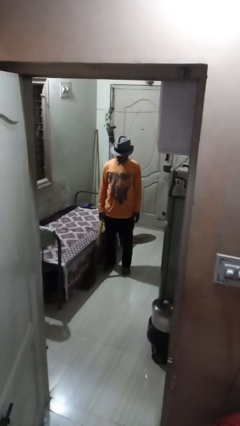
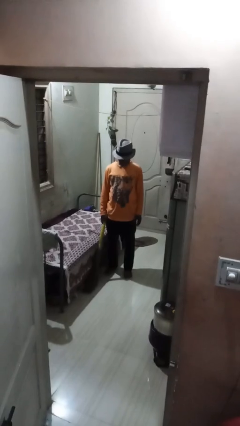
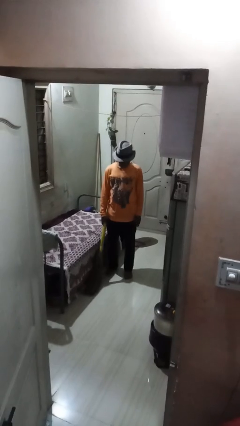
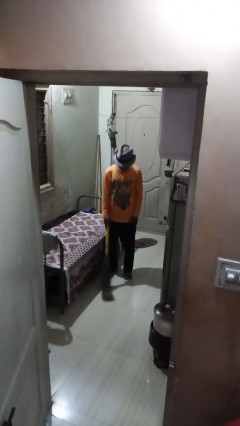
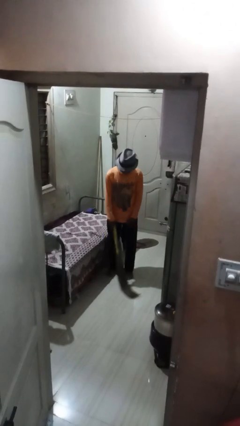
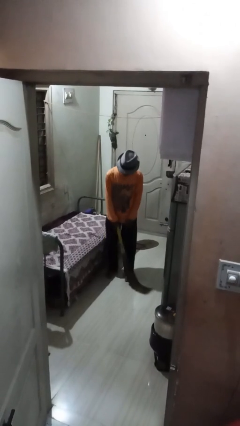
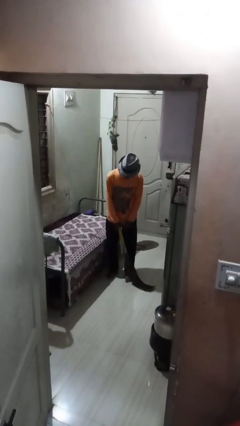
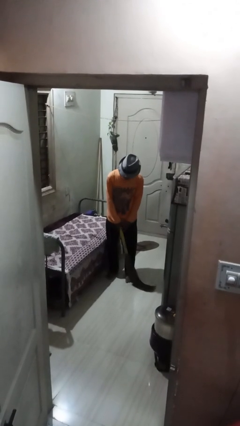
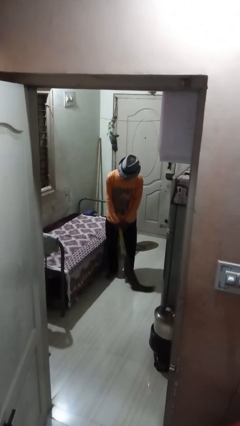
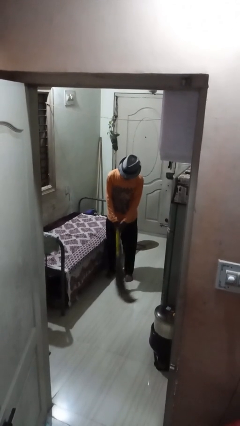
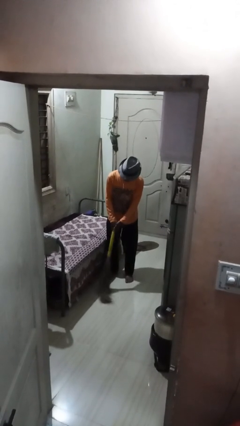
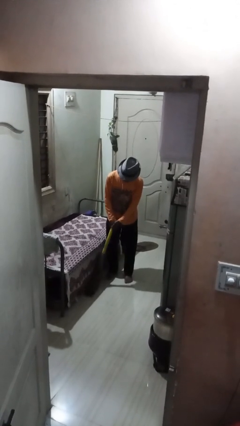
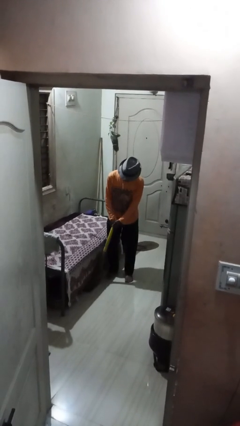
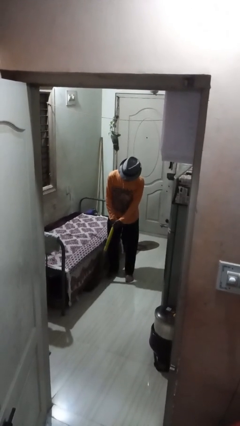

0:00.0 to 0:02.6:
person sweeps floor

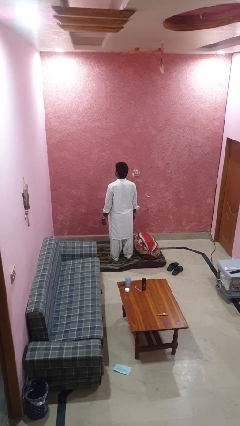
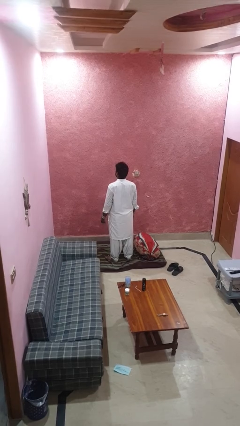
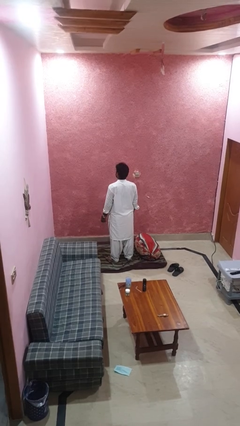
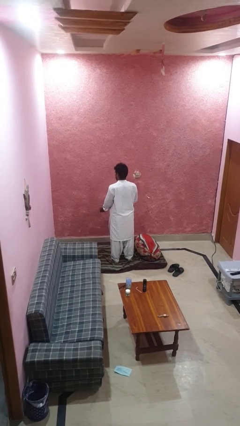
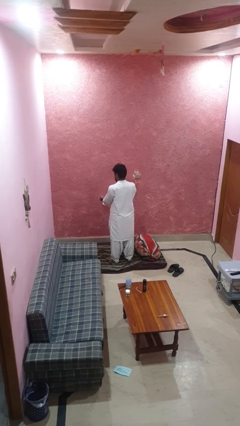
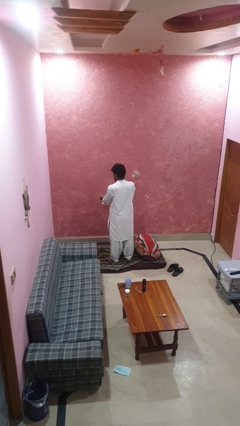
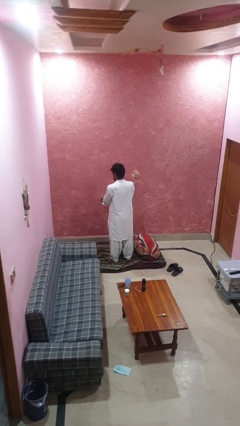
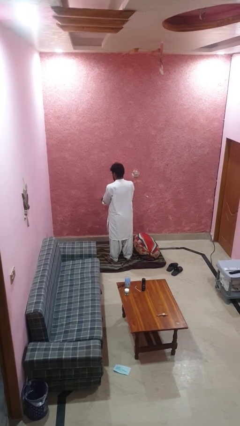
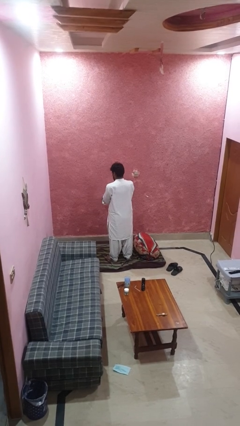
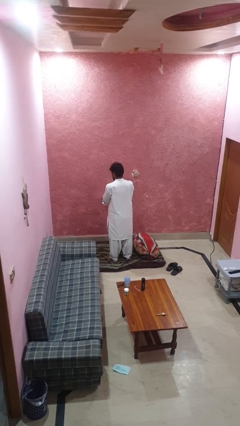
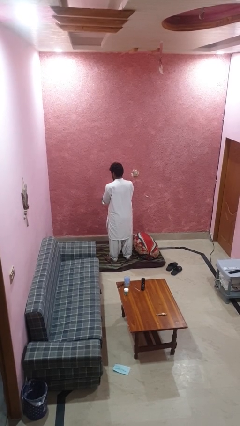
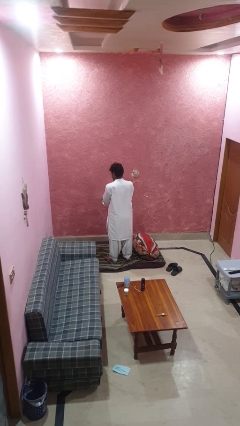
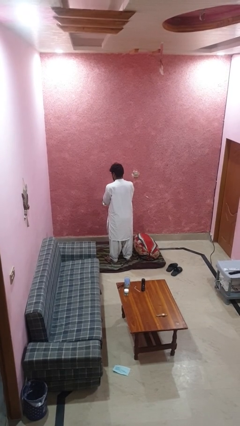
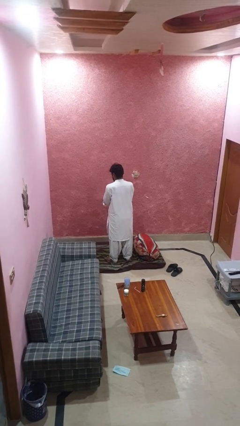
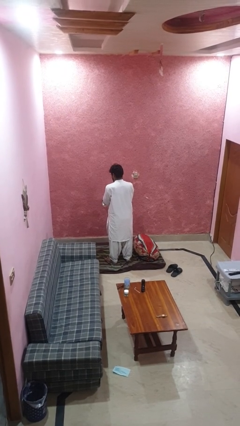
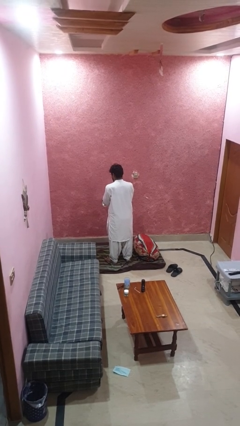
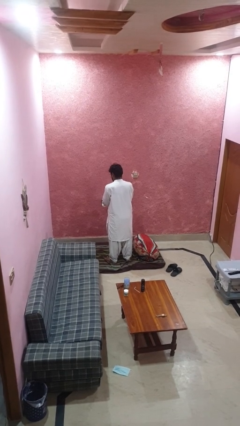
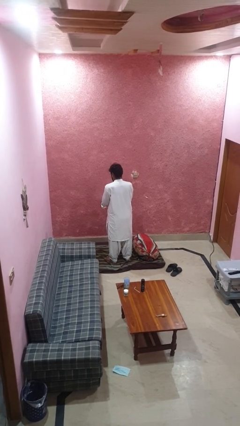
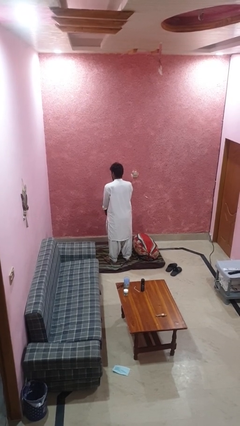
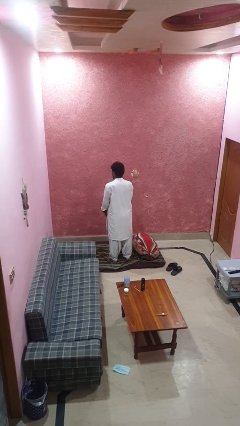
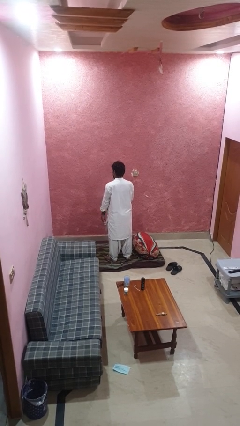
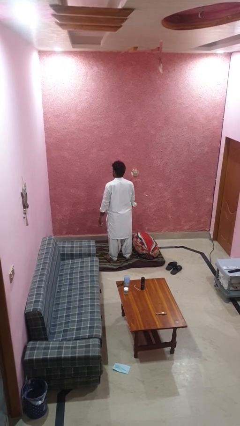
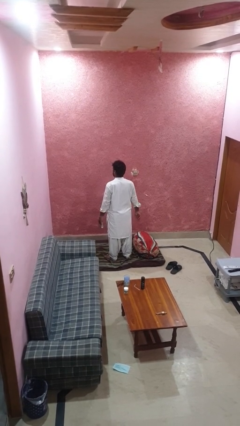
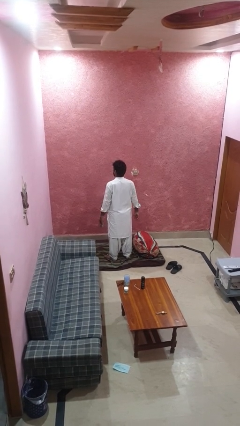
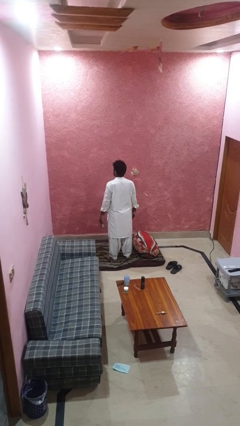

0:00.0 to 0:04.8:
person takes off wristwatch

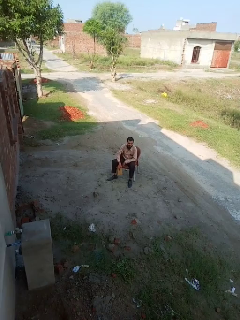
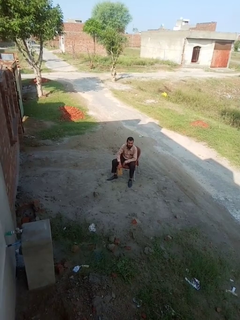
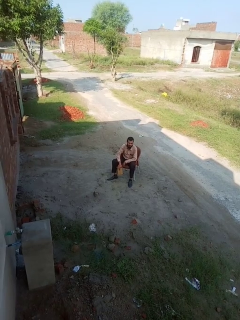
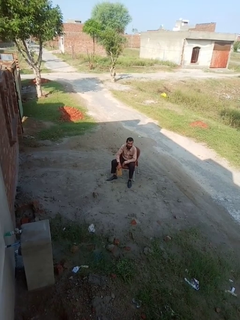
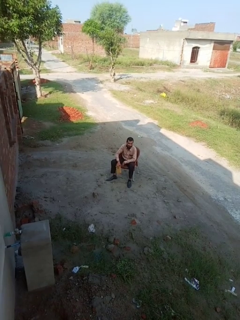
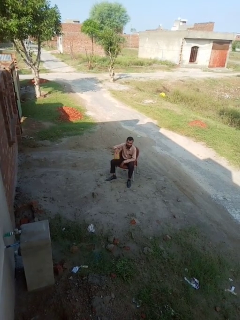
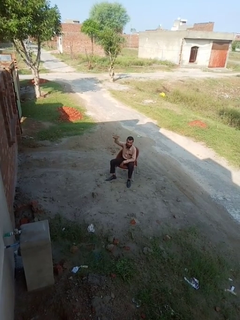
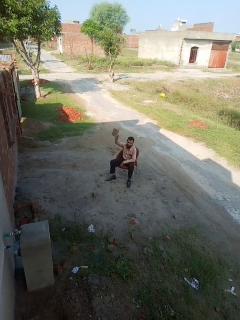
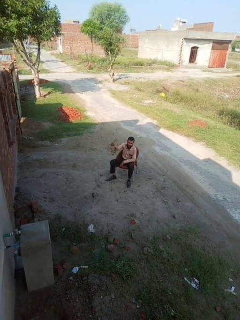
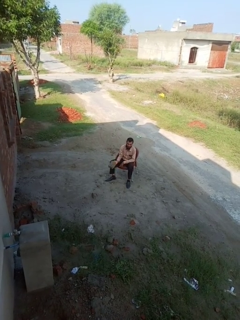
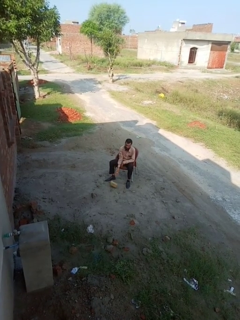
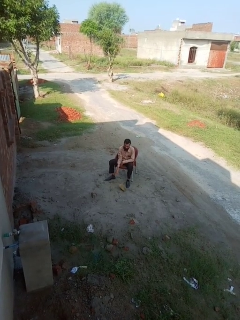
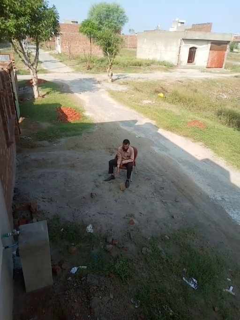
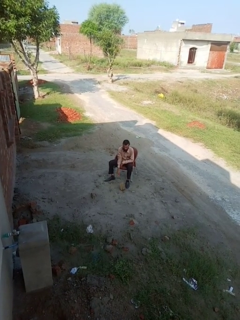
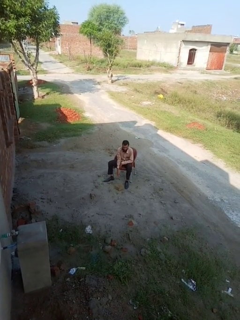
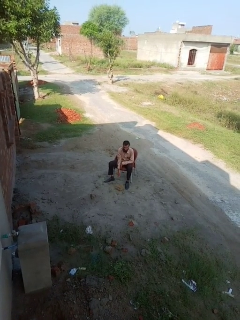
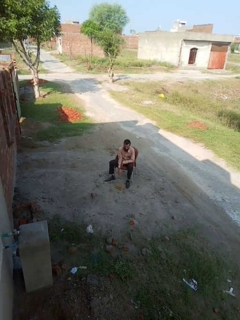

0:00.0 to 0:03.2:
person throws object into air

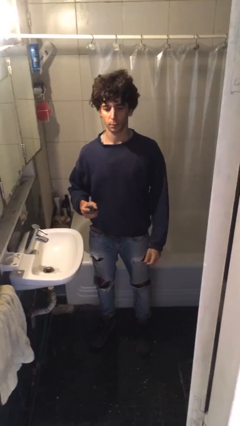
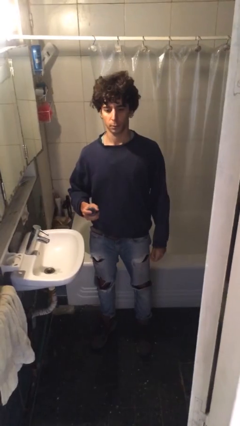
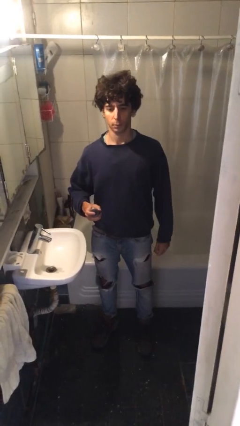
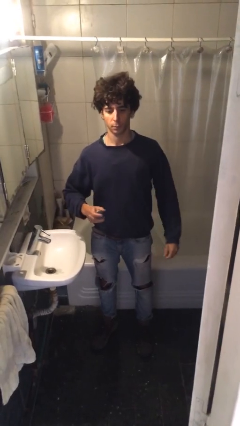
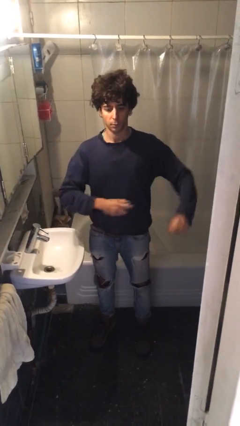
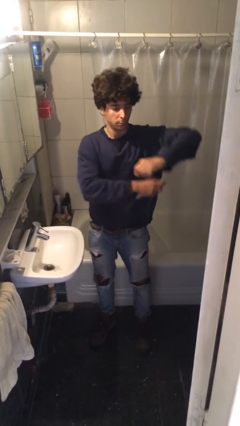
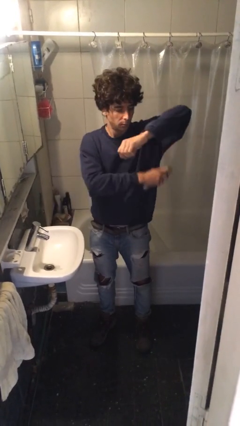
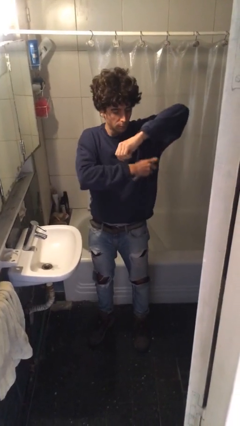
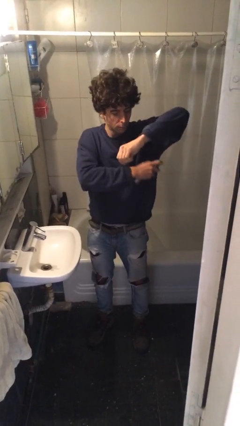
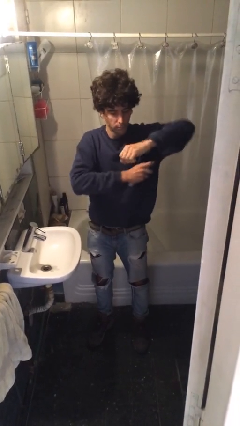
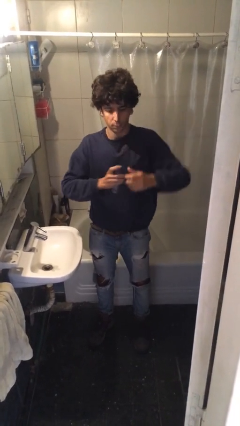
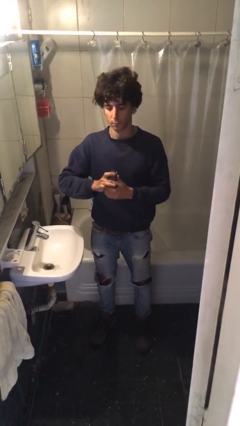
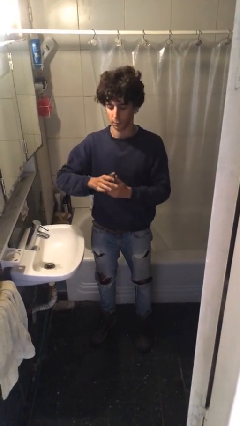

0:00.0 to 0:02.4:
person applies deodorant

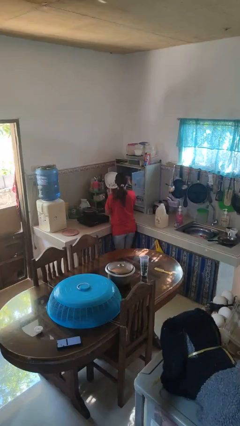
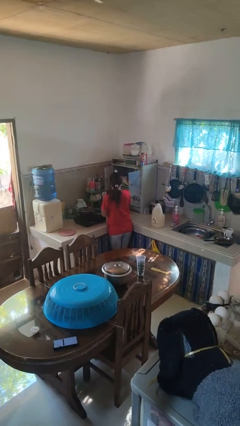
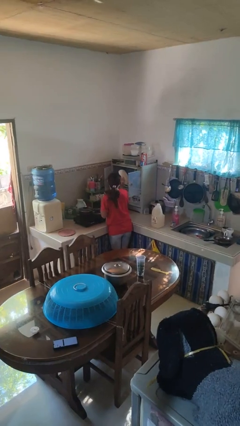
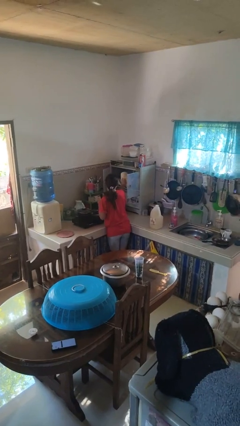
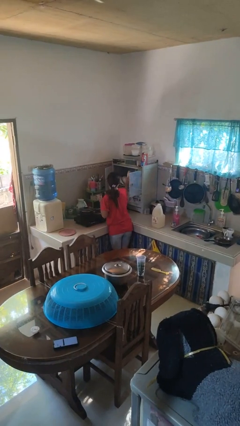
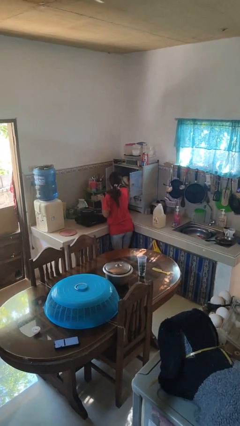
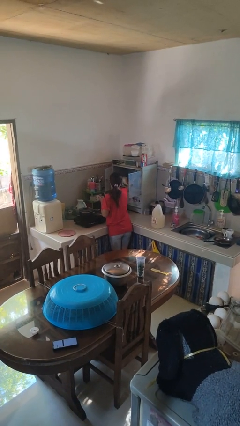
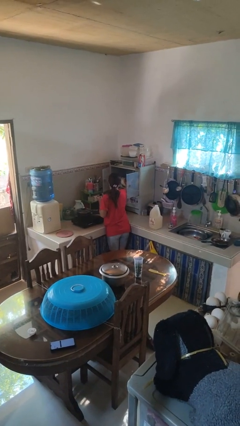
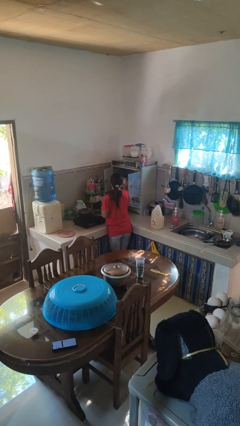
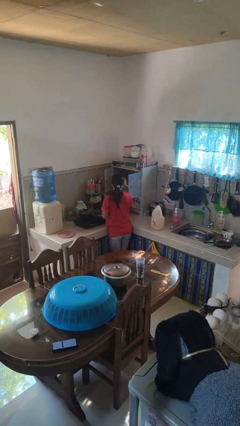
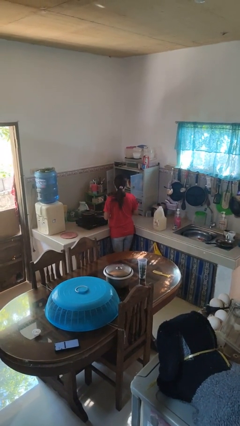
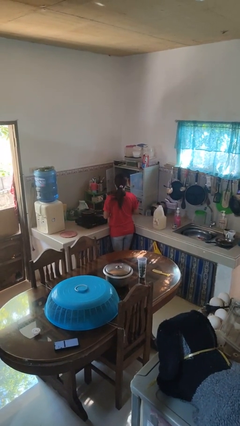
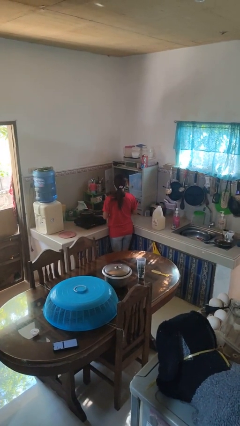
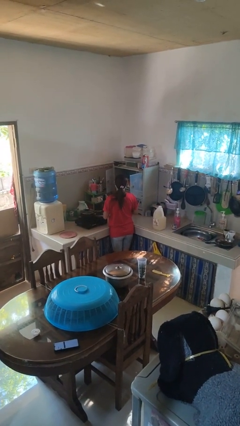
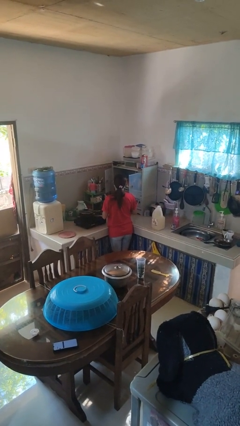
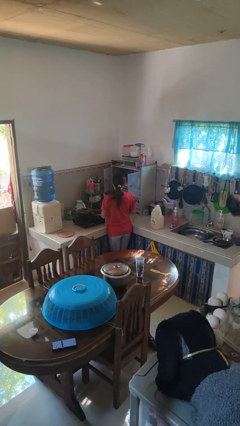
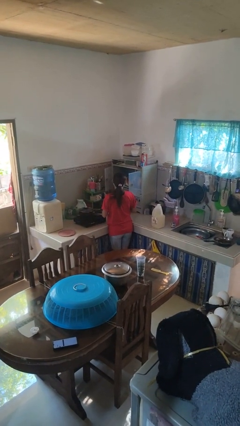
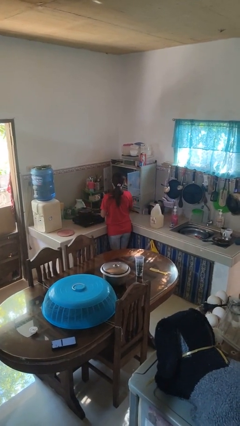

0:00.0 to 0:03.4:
person puts object in cabinet

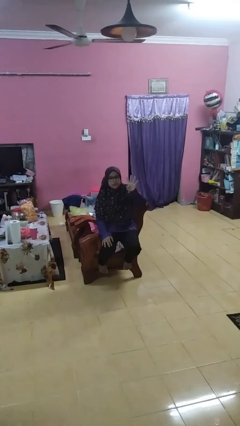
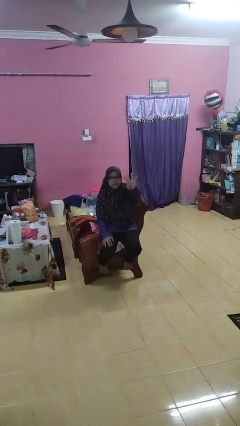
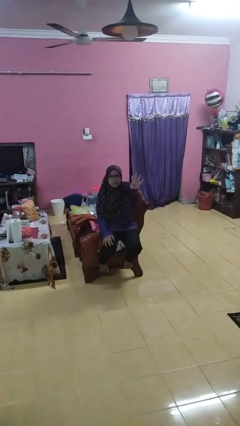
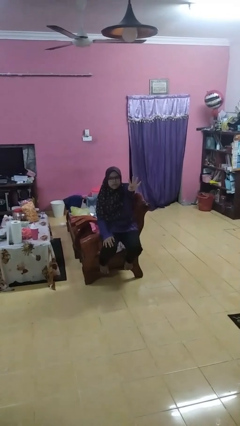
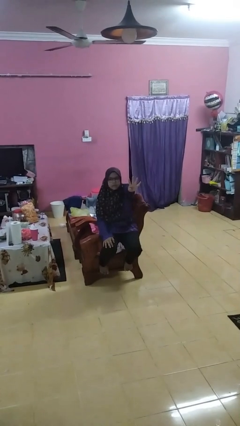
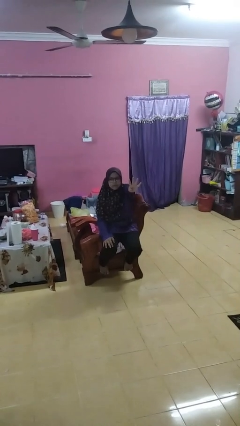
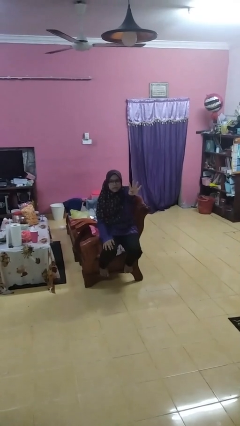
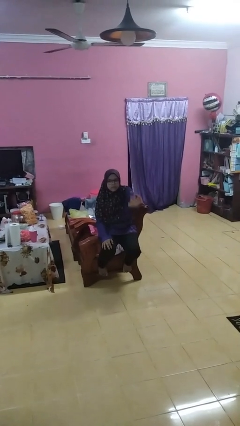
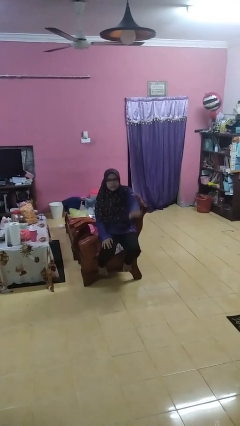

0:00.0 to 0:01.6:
person gestures number four
